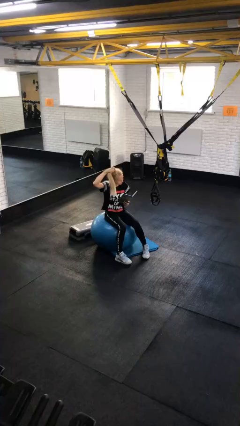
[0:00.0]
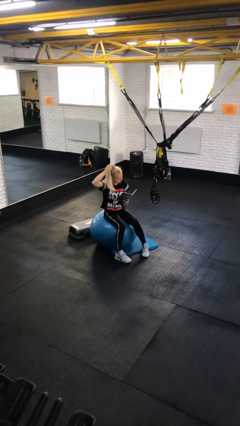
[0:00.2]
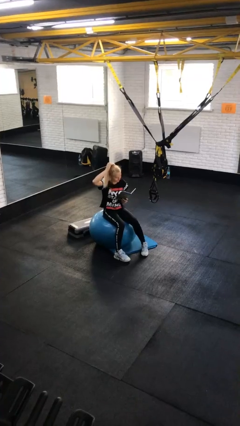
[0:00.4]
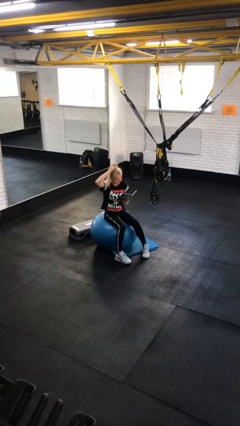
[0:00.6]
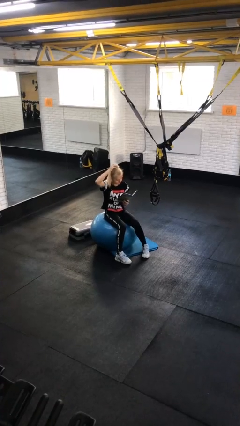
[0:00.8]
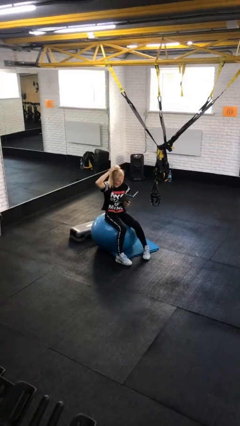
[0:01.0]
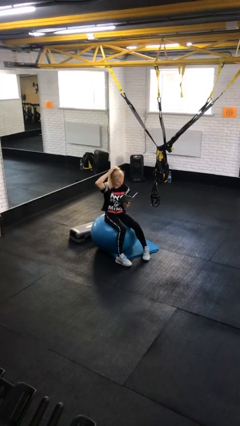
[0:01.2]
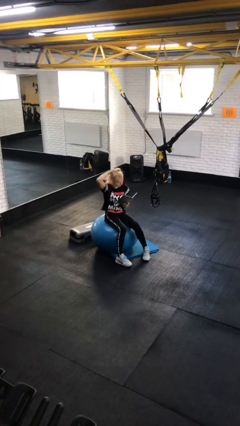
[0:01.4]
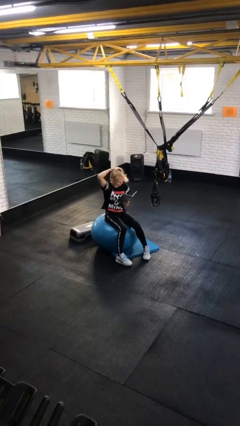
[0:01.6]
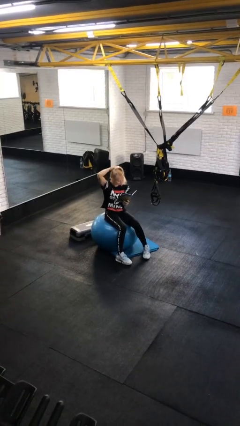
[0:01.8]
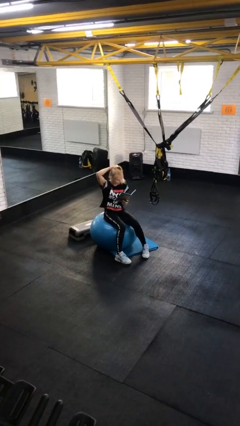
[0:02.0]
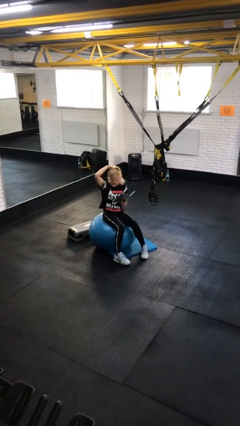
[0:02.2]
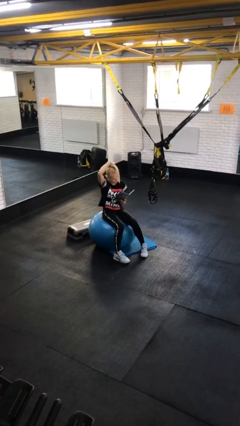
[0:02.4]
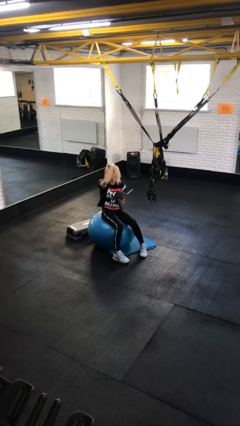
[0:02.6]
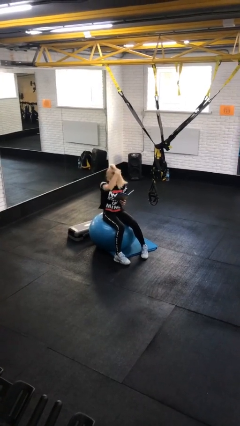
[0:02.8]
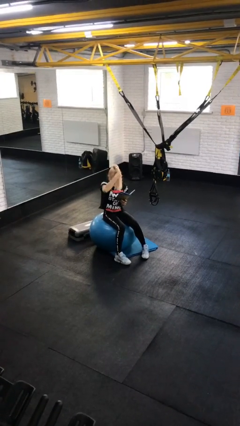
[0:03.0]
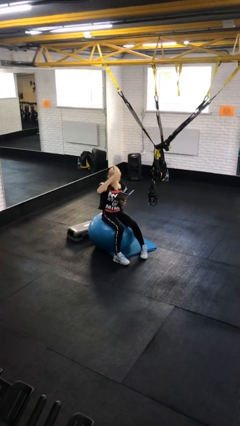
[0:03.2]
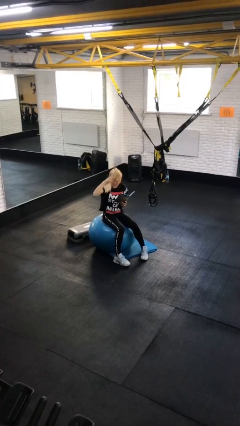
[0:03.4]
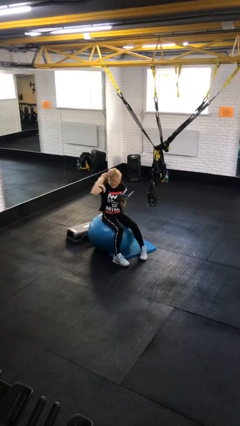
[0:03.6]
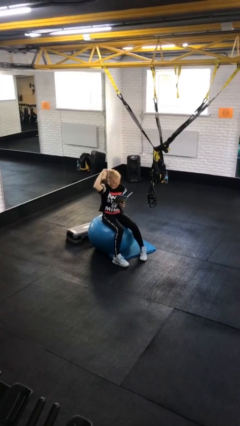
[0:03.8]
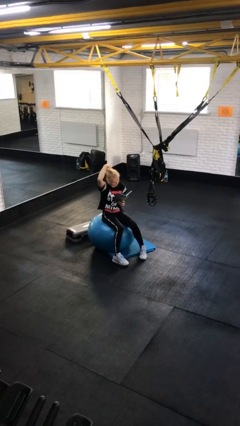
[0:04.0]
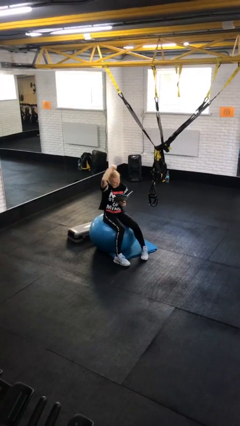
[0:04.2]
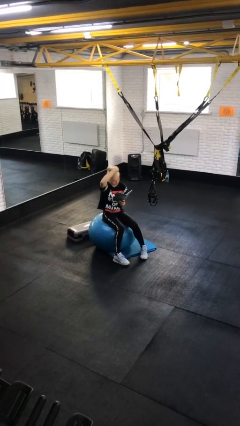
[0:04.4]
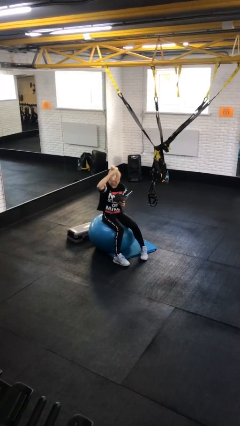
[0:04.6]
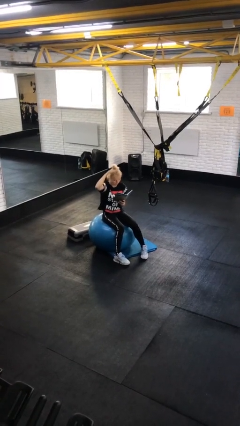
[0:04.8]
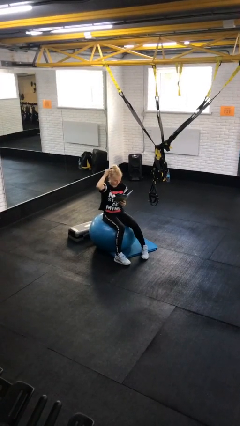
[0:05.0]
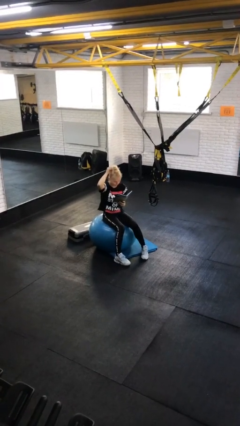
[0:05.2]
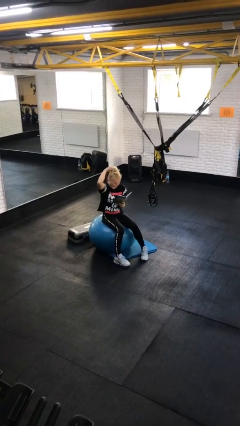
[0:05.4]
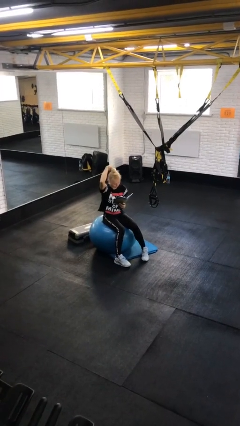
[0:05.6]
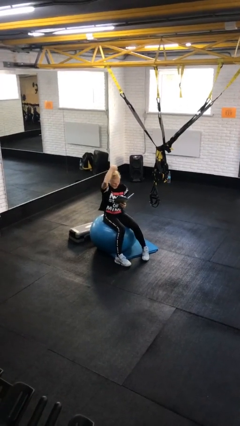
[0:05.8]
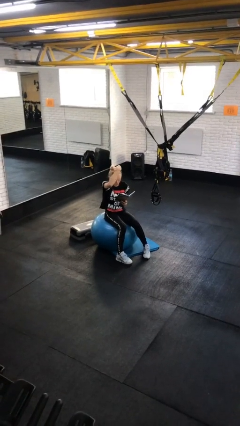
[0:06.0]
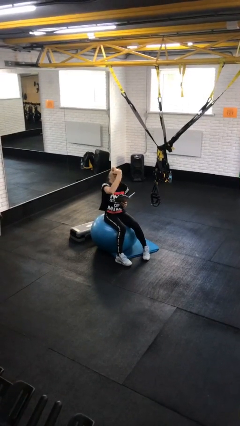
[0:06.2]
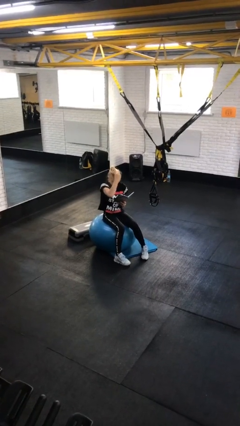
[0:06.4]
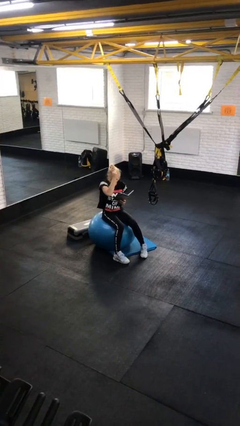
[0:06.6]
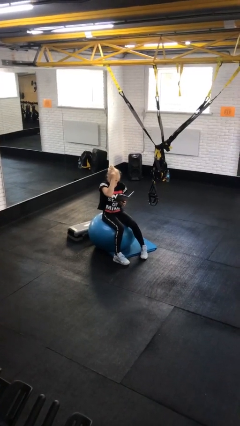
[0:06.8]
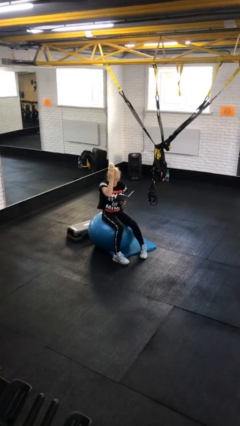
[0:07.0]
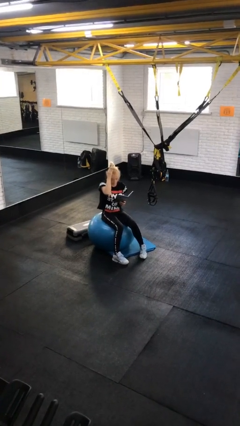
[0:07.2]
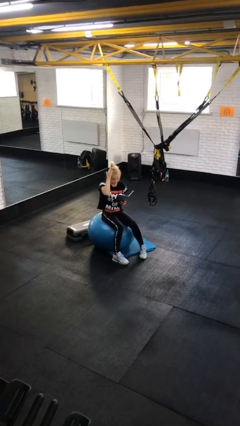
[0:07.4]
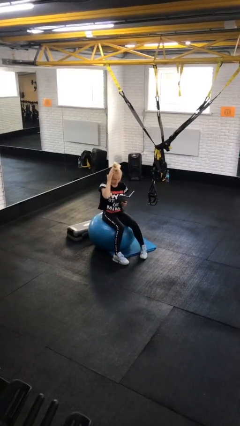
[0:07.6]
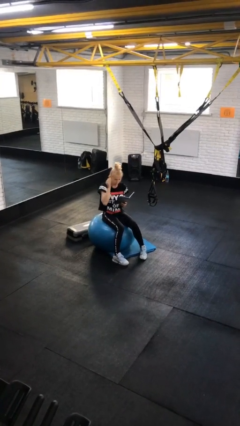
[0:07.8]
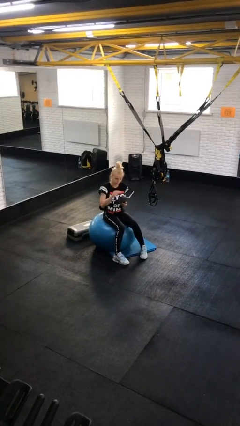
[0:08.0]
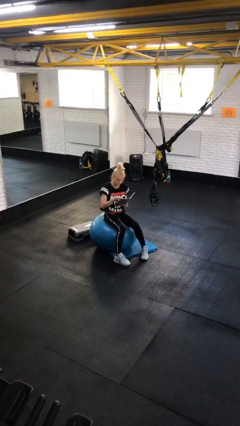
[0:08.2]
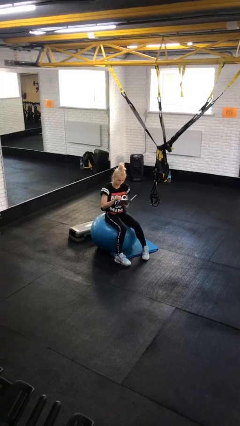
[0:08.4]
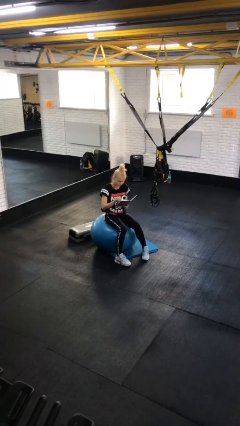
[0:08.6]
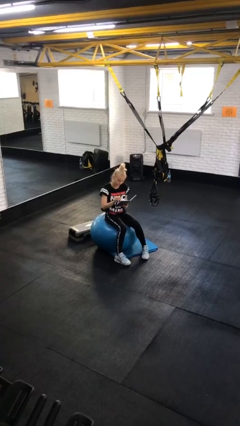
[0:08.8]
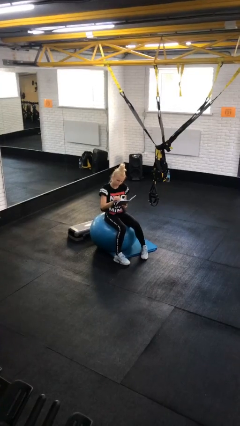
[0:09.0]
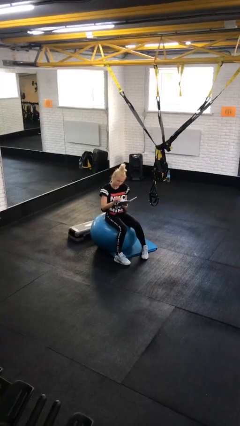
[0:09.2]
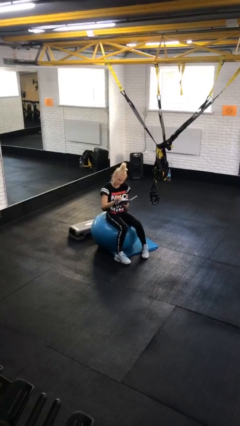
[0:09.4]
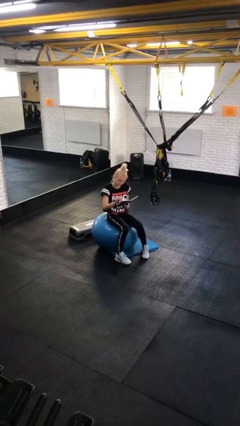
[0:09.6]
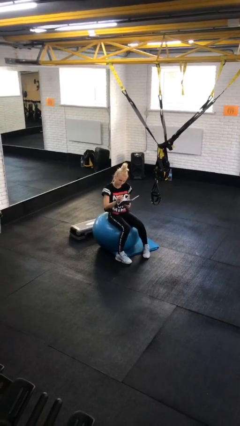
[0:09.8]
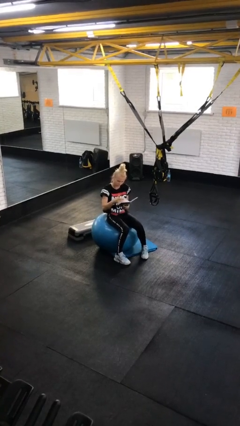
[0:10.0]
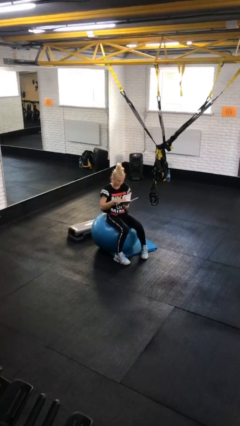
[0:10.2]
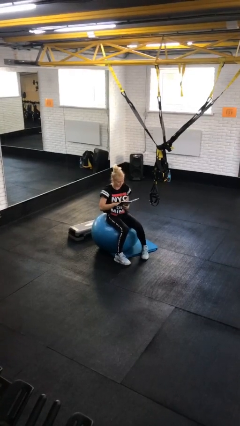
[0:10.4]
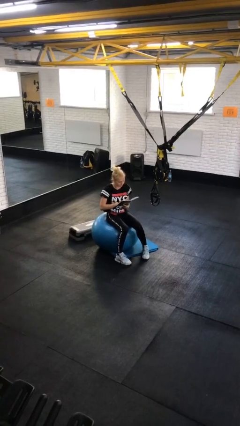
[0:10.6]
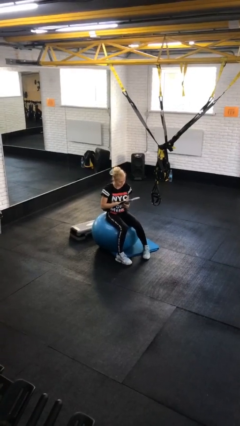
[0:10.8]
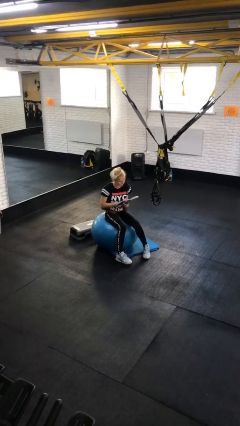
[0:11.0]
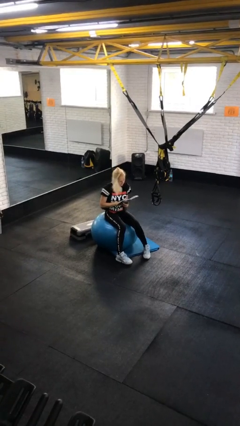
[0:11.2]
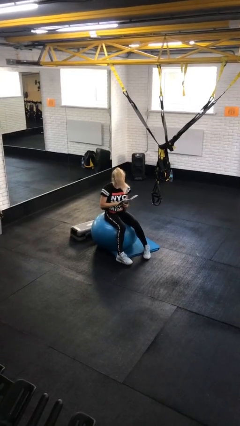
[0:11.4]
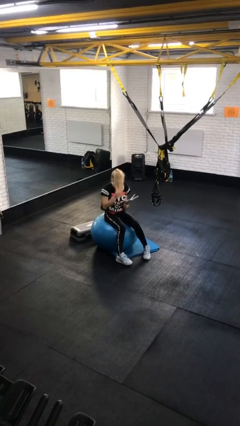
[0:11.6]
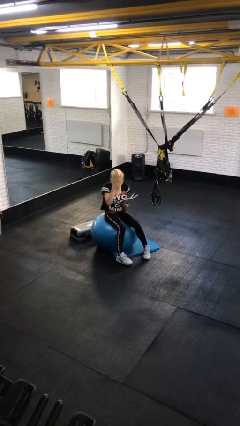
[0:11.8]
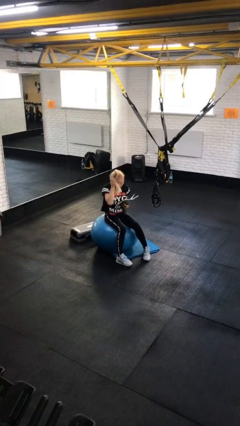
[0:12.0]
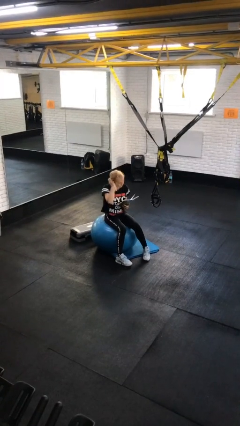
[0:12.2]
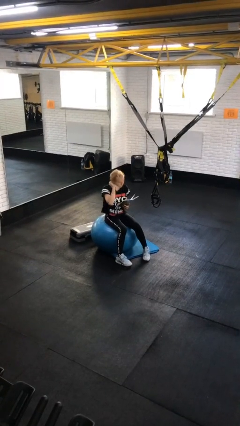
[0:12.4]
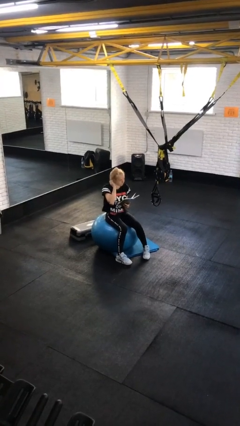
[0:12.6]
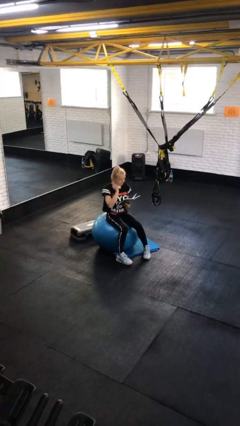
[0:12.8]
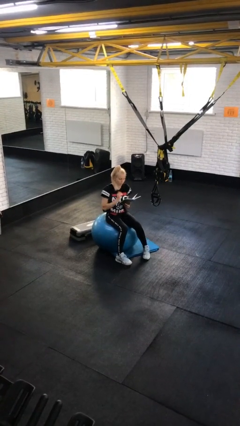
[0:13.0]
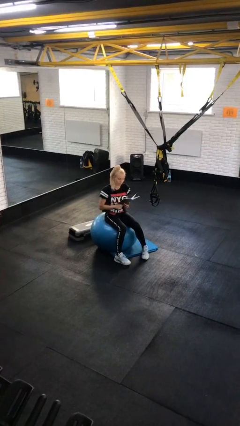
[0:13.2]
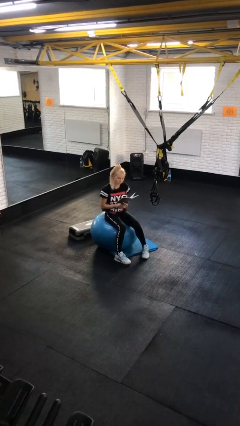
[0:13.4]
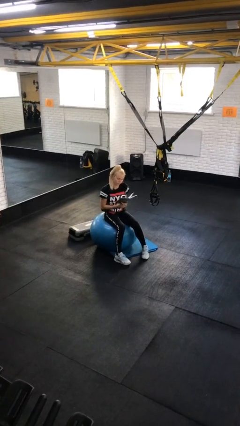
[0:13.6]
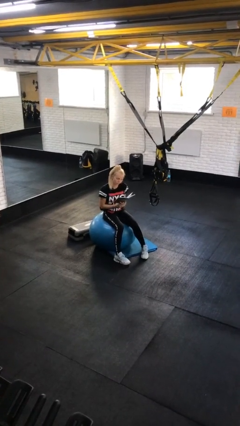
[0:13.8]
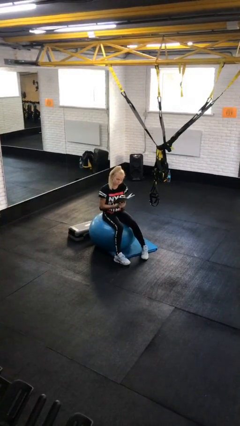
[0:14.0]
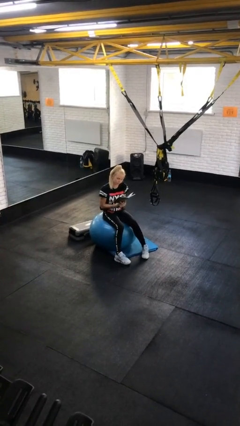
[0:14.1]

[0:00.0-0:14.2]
person reads document

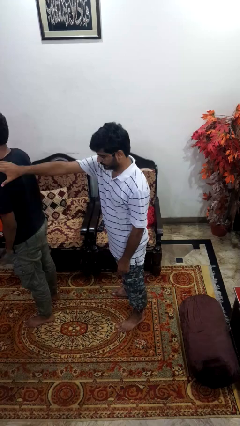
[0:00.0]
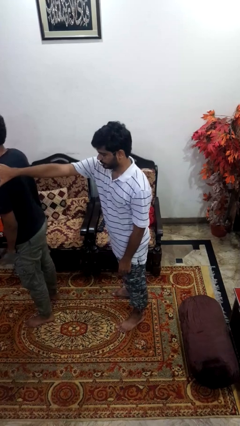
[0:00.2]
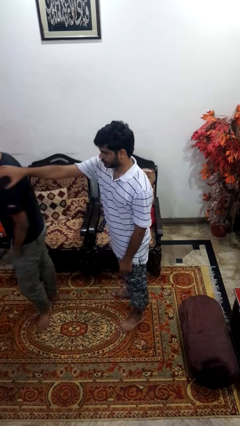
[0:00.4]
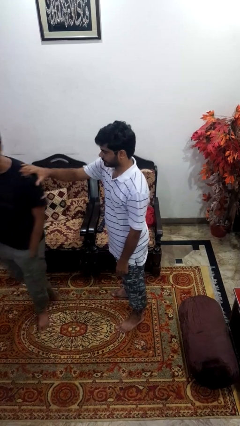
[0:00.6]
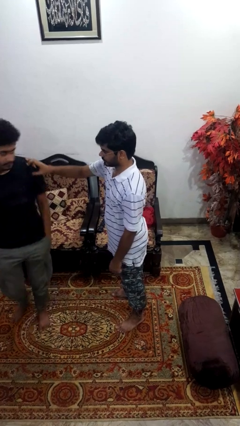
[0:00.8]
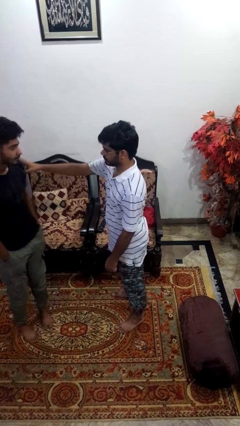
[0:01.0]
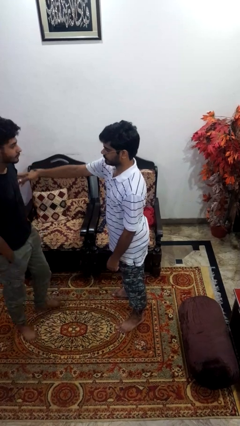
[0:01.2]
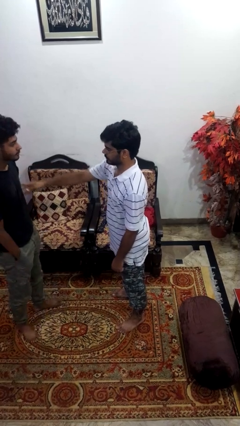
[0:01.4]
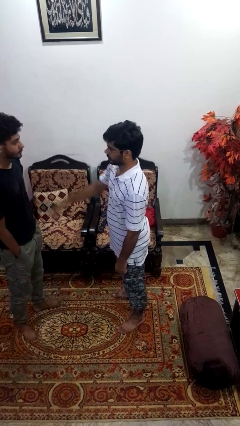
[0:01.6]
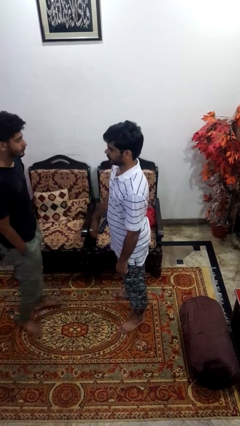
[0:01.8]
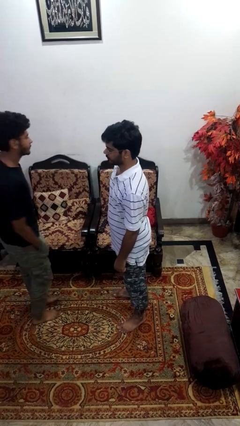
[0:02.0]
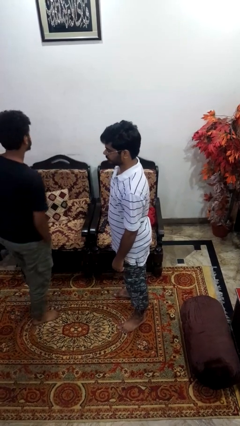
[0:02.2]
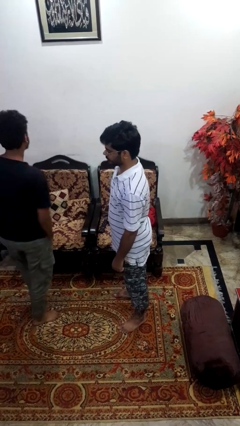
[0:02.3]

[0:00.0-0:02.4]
person spins person around

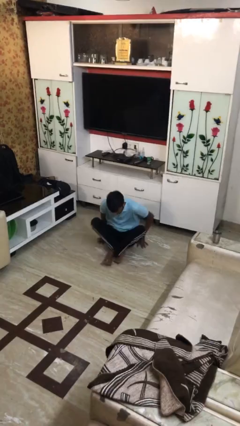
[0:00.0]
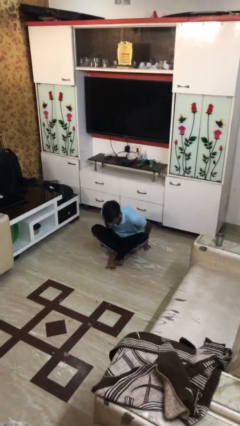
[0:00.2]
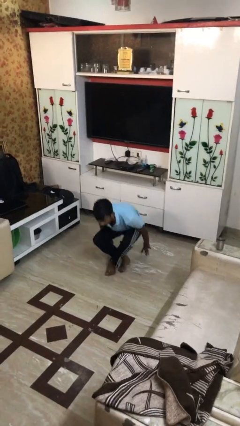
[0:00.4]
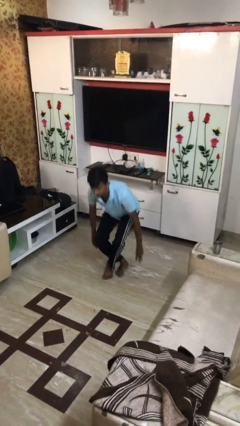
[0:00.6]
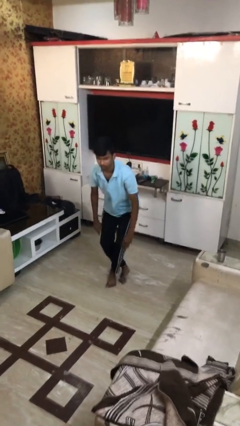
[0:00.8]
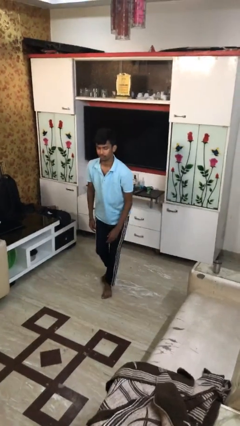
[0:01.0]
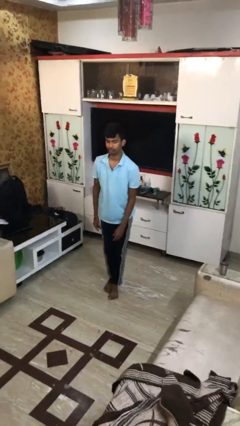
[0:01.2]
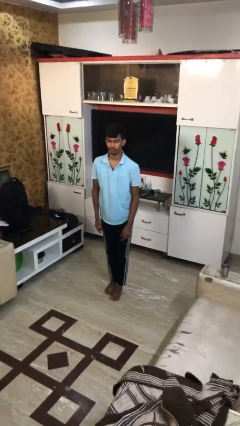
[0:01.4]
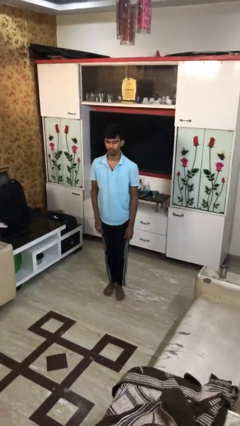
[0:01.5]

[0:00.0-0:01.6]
person stands up from floor
